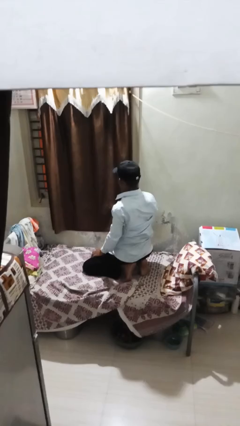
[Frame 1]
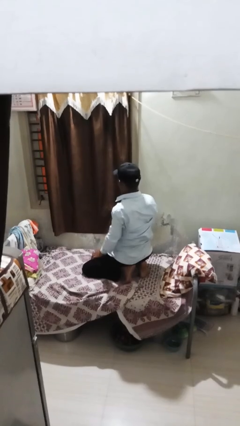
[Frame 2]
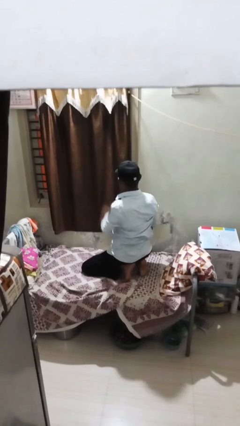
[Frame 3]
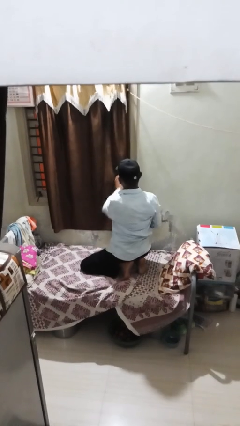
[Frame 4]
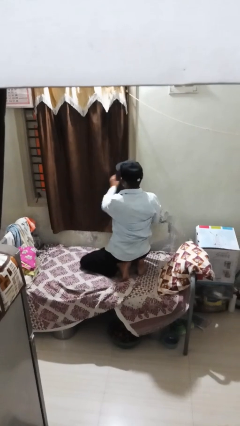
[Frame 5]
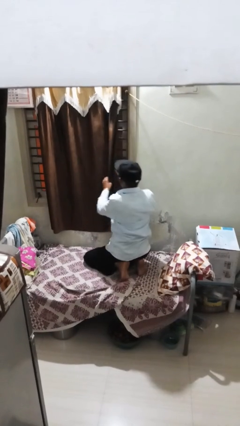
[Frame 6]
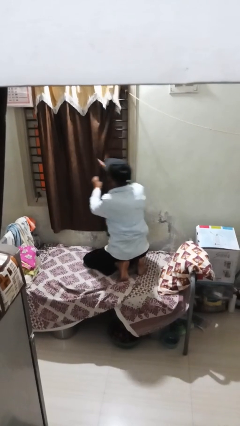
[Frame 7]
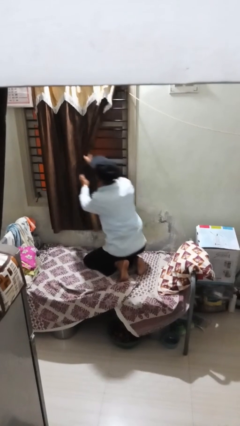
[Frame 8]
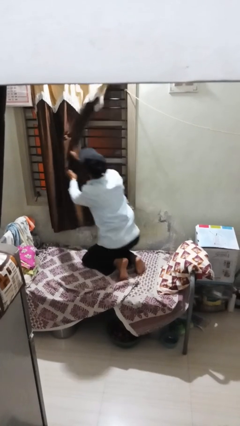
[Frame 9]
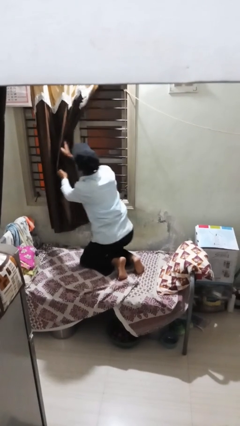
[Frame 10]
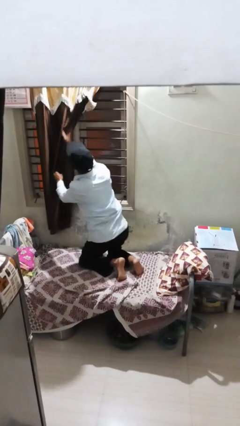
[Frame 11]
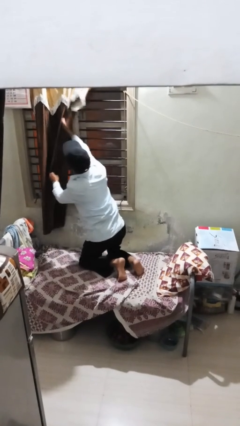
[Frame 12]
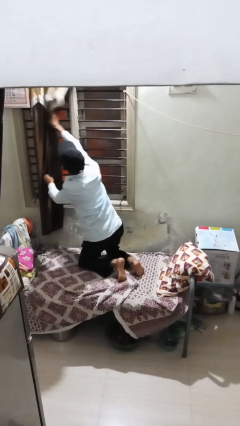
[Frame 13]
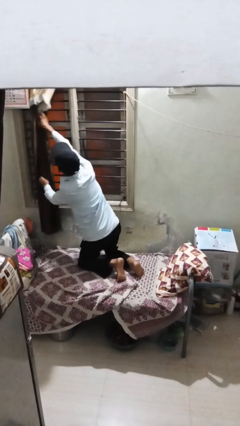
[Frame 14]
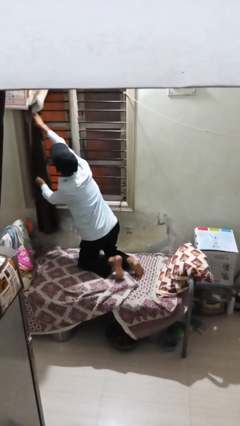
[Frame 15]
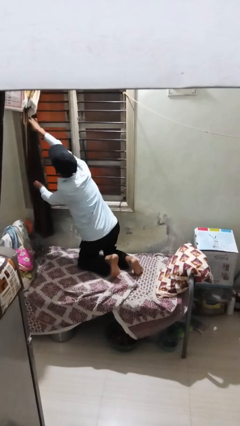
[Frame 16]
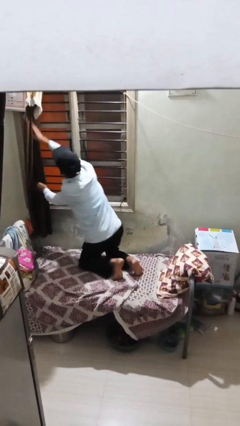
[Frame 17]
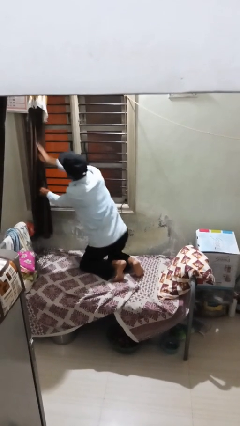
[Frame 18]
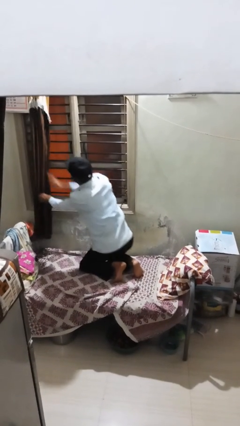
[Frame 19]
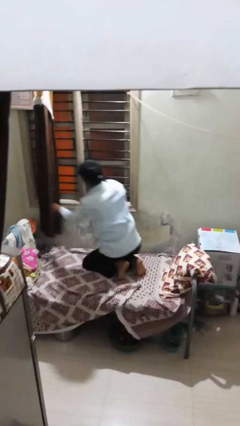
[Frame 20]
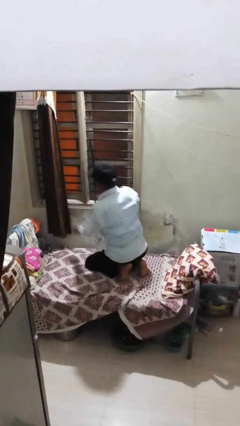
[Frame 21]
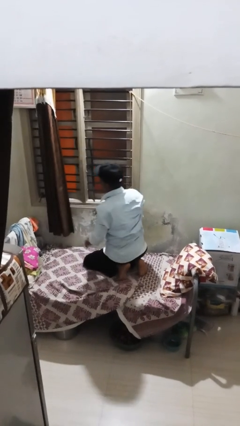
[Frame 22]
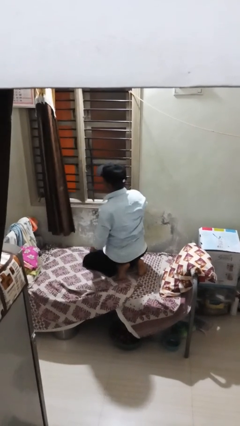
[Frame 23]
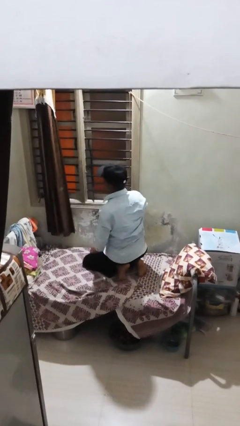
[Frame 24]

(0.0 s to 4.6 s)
person opens curtains

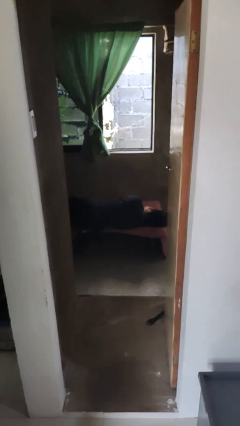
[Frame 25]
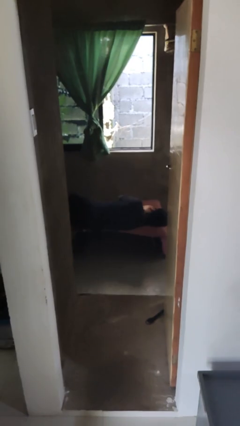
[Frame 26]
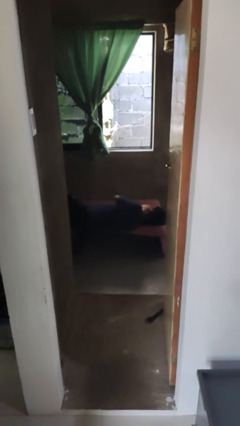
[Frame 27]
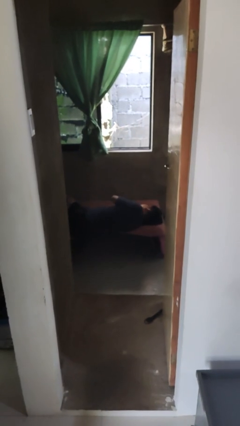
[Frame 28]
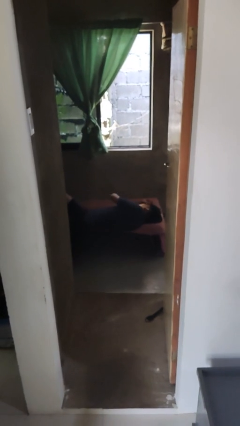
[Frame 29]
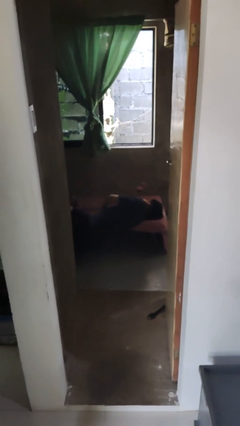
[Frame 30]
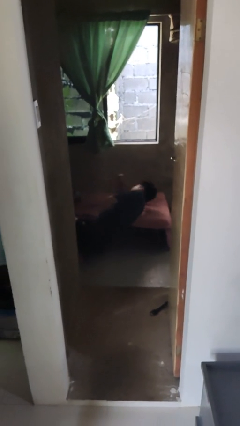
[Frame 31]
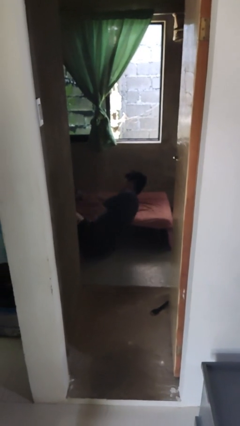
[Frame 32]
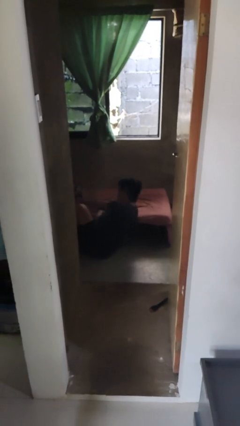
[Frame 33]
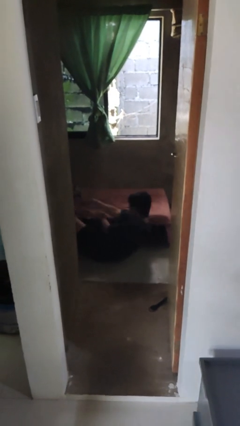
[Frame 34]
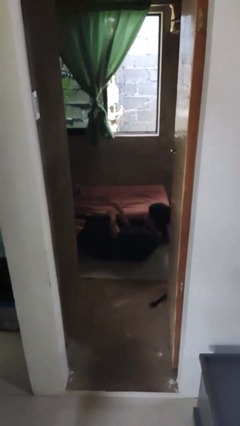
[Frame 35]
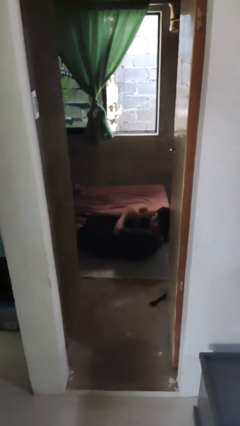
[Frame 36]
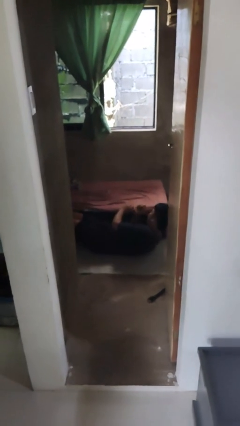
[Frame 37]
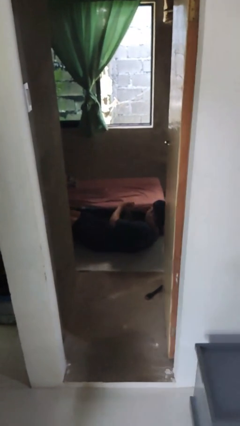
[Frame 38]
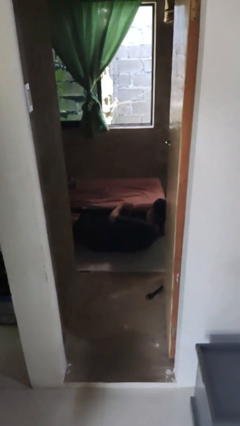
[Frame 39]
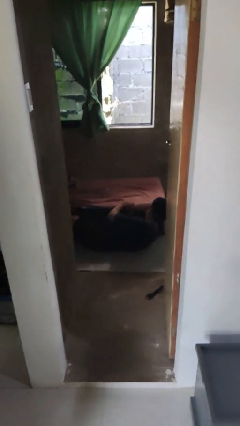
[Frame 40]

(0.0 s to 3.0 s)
person falls from bed

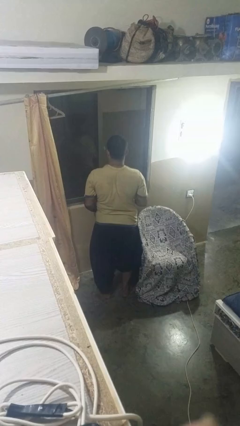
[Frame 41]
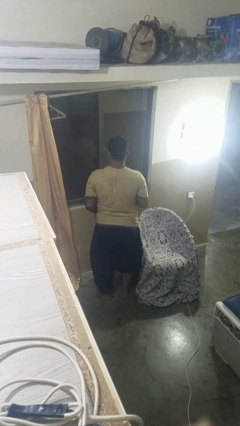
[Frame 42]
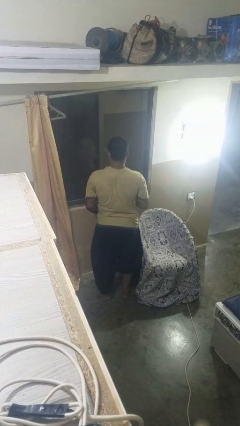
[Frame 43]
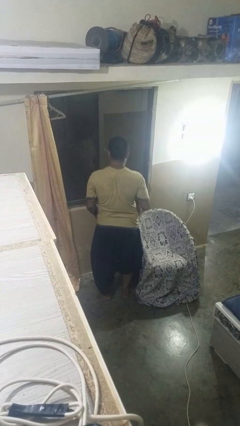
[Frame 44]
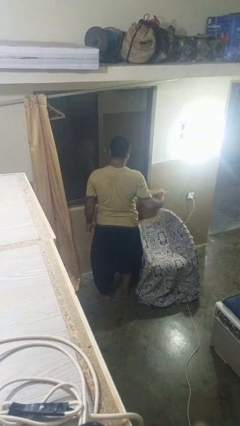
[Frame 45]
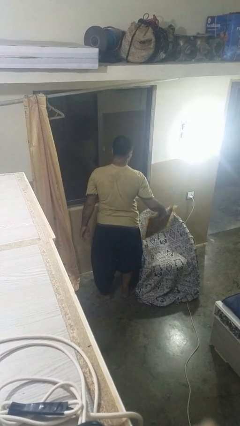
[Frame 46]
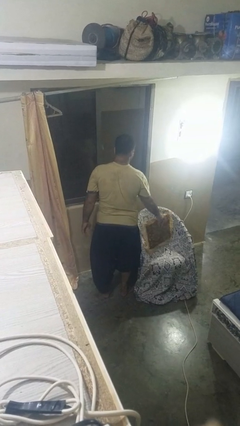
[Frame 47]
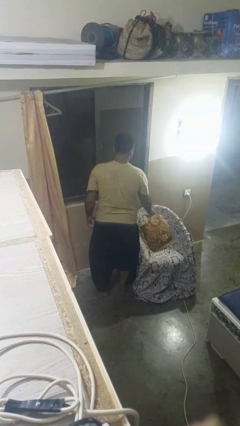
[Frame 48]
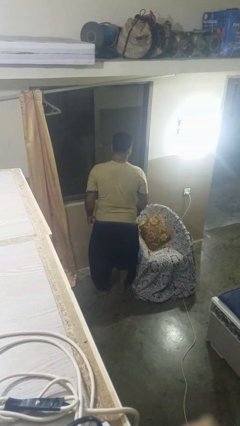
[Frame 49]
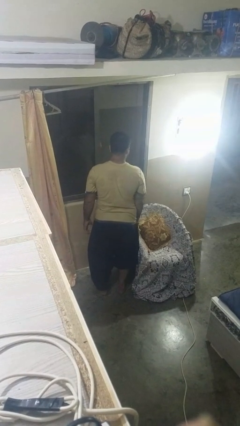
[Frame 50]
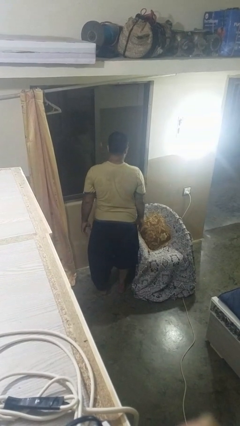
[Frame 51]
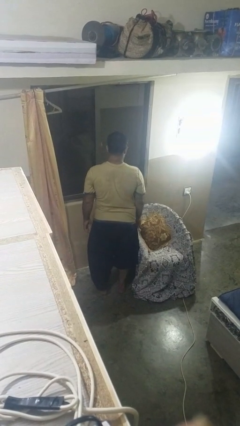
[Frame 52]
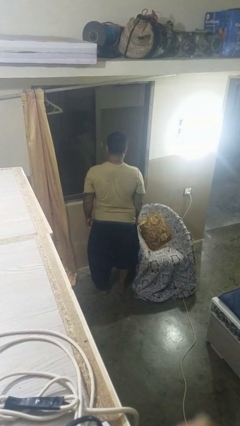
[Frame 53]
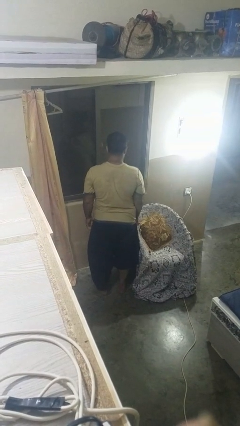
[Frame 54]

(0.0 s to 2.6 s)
person puts down object on couch

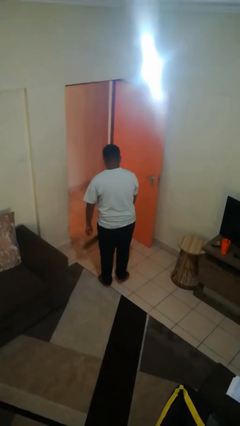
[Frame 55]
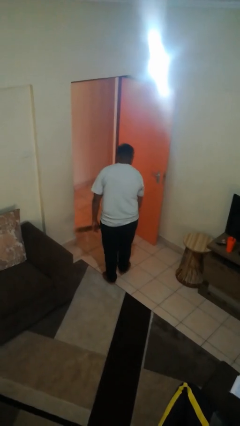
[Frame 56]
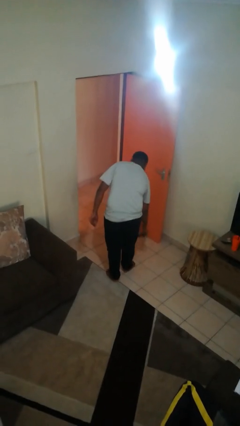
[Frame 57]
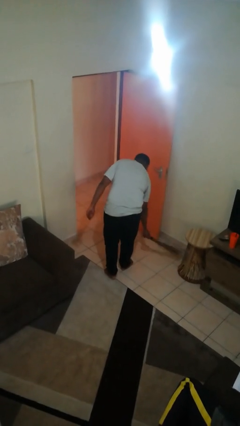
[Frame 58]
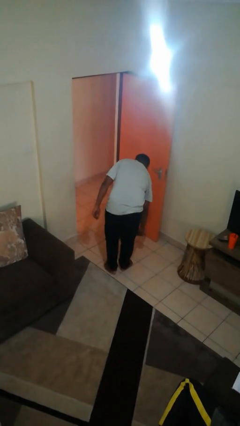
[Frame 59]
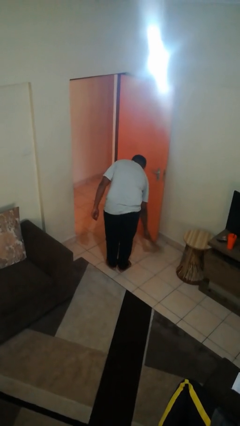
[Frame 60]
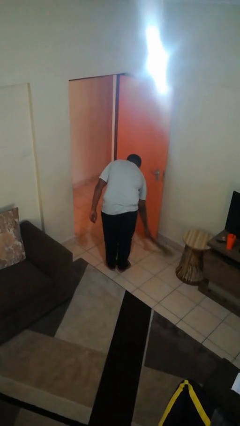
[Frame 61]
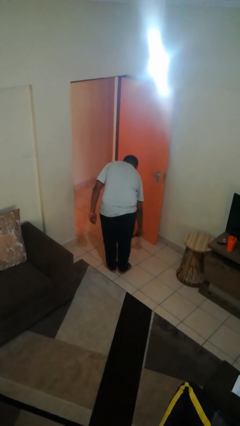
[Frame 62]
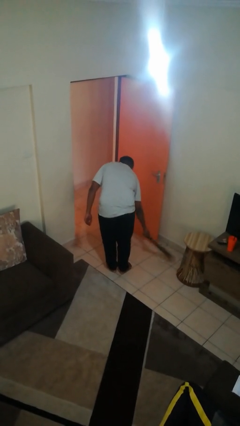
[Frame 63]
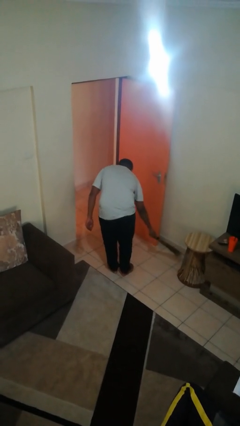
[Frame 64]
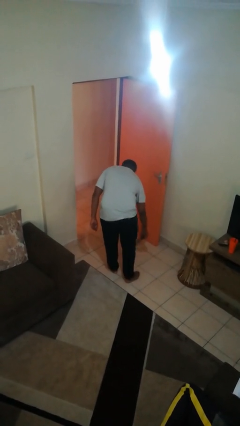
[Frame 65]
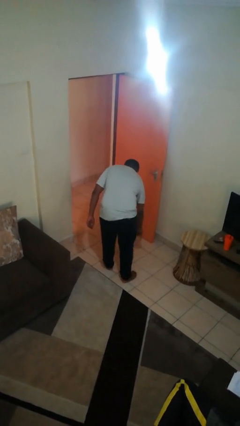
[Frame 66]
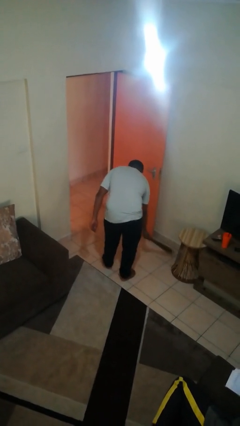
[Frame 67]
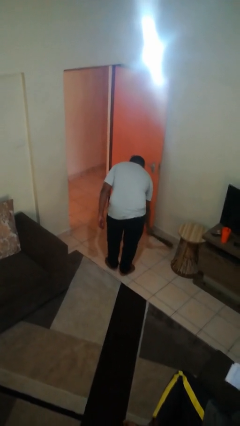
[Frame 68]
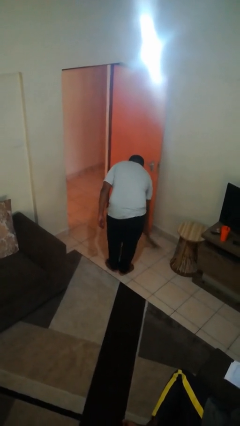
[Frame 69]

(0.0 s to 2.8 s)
person sweeps floor

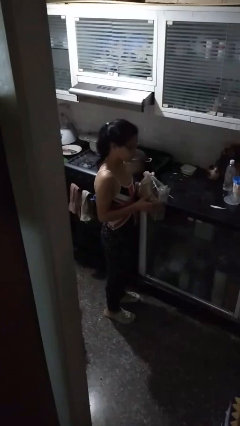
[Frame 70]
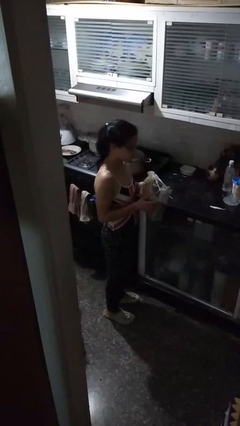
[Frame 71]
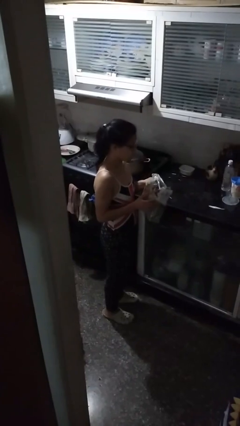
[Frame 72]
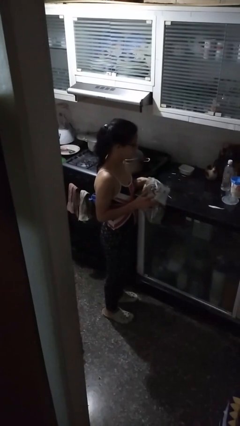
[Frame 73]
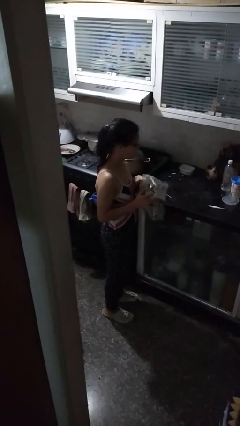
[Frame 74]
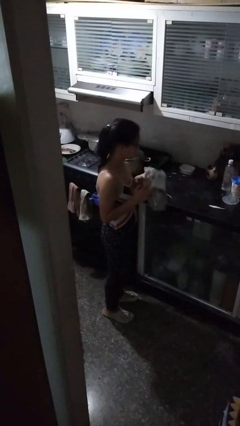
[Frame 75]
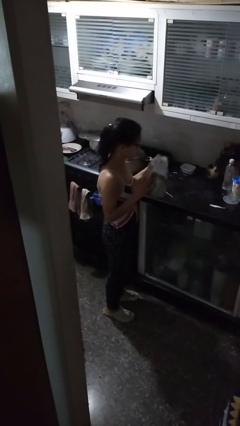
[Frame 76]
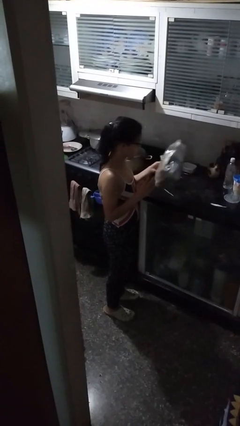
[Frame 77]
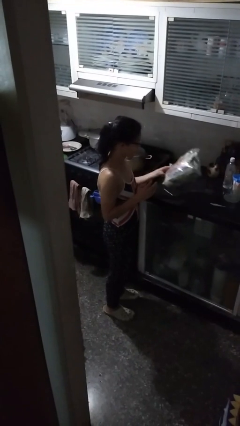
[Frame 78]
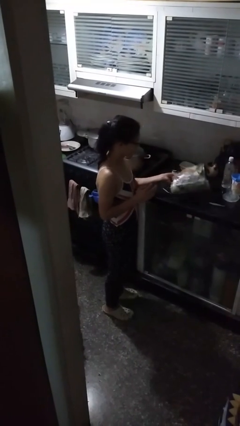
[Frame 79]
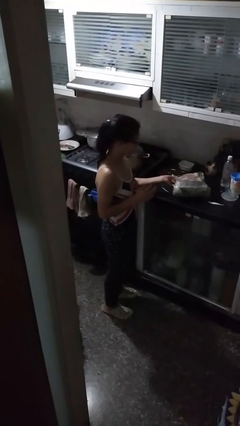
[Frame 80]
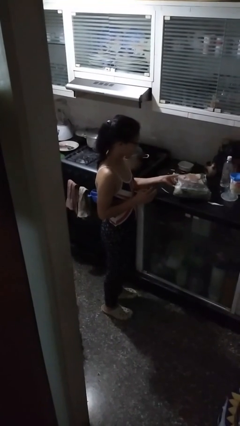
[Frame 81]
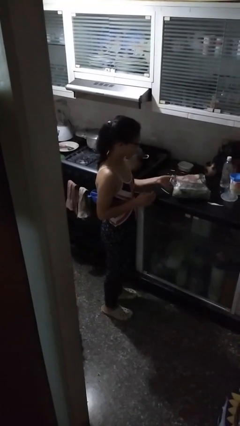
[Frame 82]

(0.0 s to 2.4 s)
person puts down object on countertop

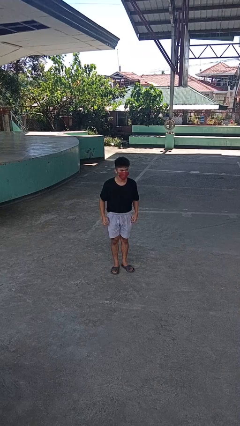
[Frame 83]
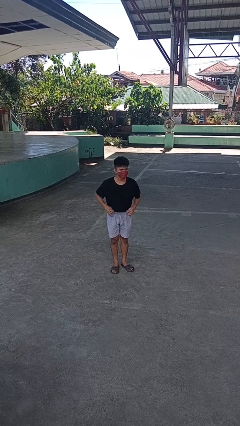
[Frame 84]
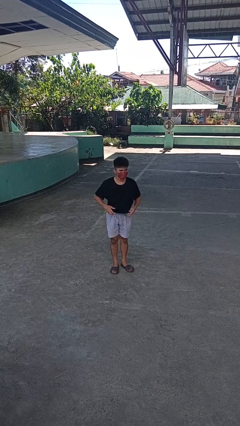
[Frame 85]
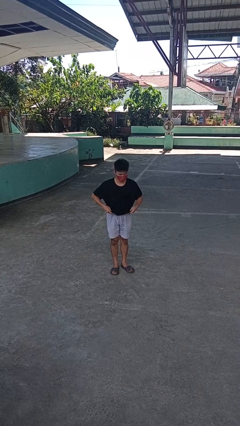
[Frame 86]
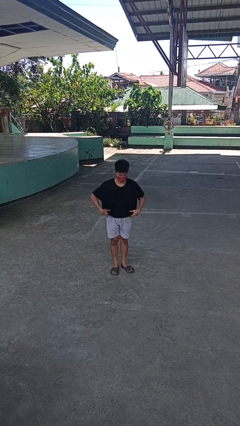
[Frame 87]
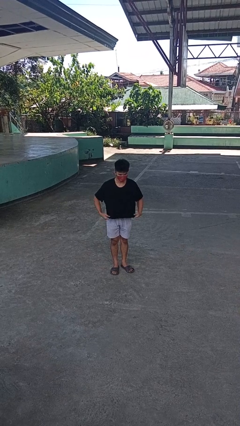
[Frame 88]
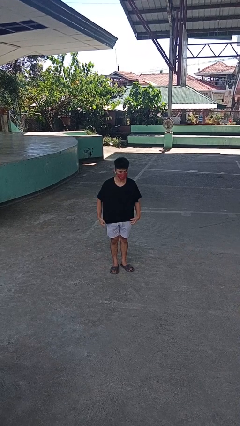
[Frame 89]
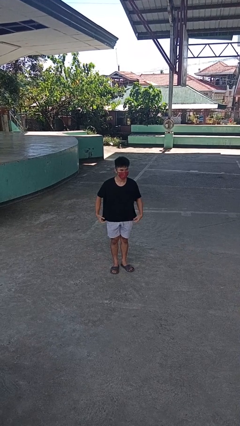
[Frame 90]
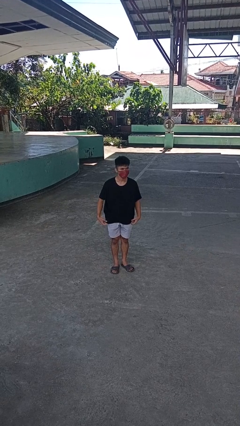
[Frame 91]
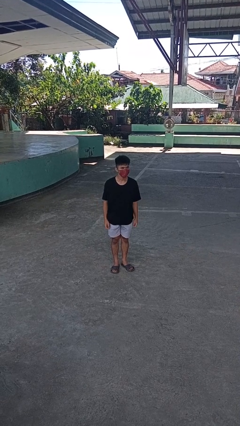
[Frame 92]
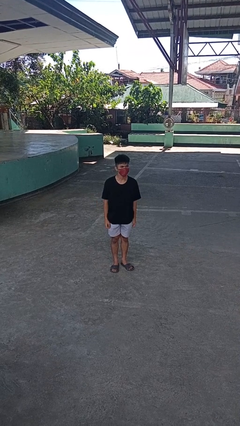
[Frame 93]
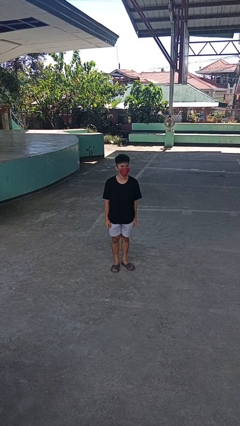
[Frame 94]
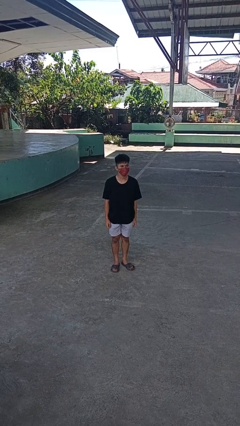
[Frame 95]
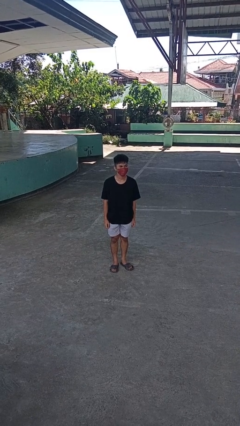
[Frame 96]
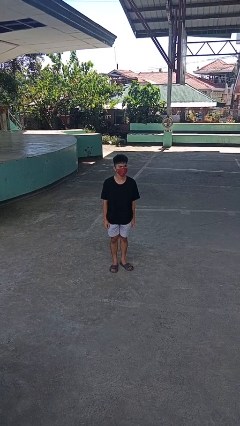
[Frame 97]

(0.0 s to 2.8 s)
person untucks shirt
